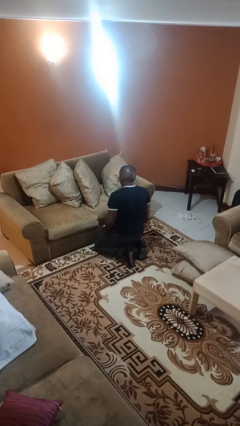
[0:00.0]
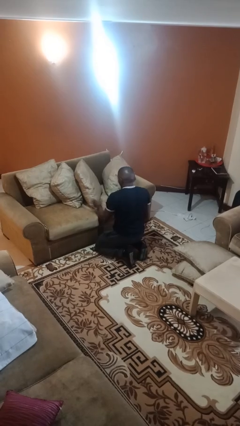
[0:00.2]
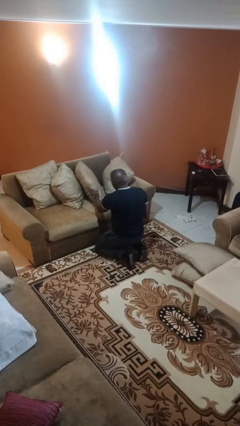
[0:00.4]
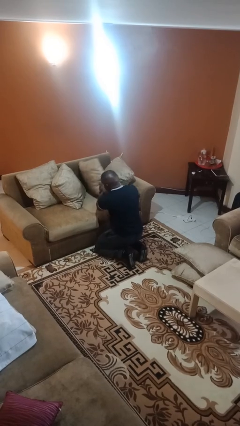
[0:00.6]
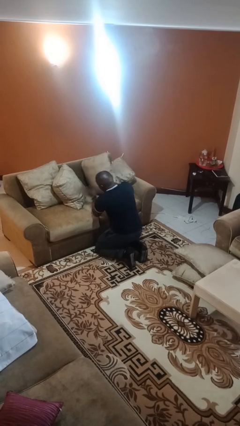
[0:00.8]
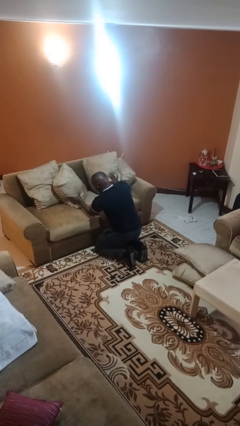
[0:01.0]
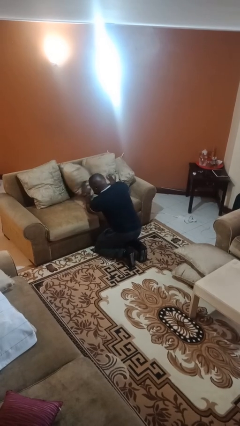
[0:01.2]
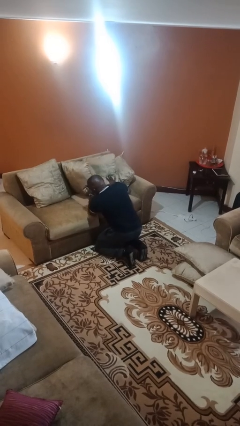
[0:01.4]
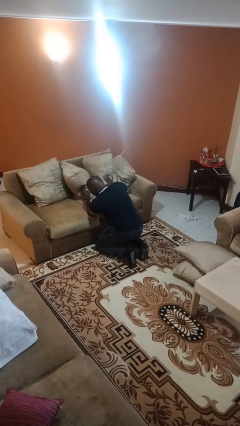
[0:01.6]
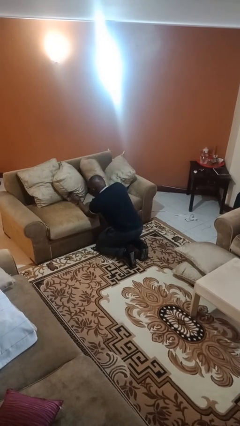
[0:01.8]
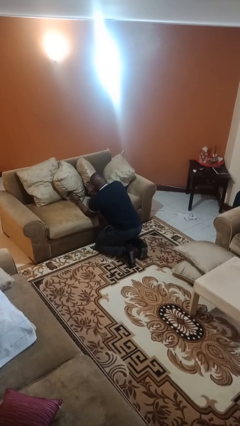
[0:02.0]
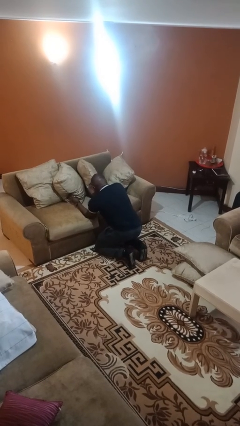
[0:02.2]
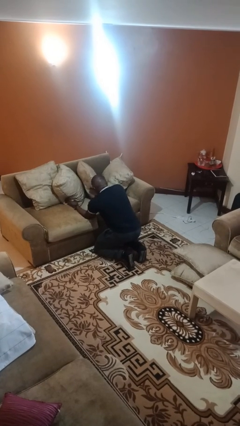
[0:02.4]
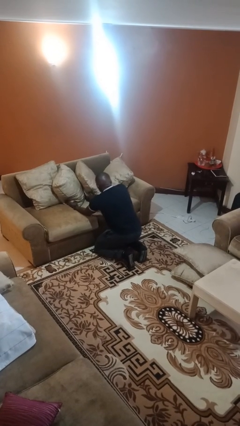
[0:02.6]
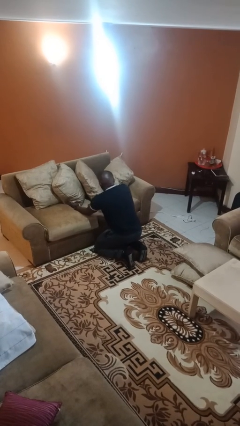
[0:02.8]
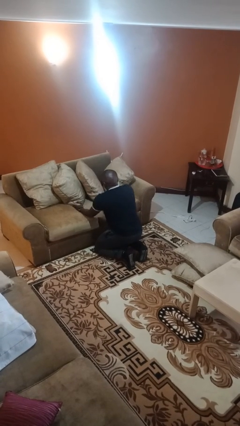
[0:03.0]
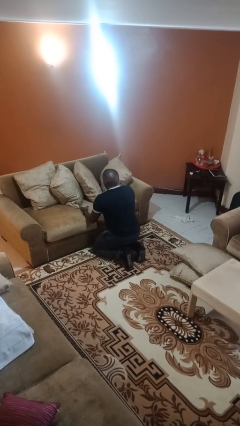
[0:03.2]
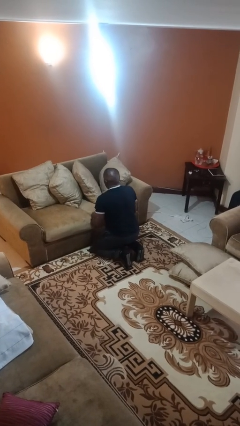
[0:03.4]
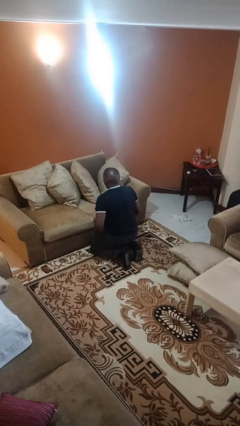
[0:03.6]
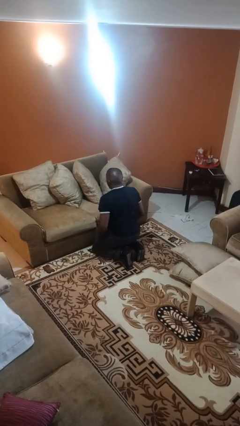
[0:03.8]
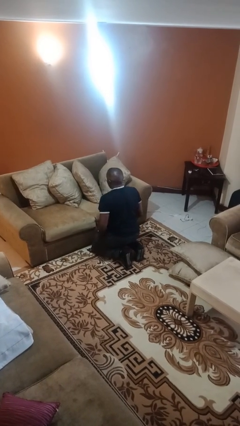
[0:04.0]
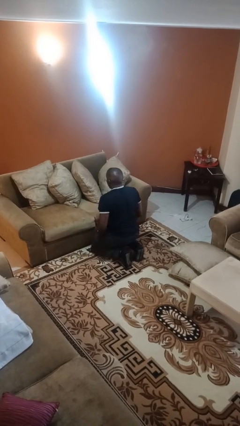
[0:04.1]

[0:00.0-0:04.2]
person searches in couch

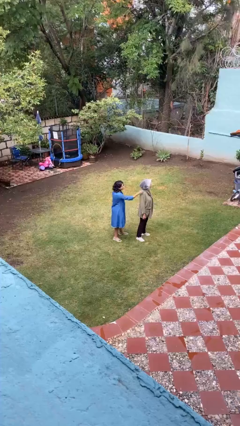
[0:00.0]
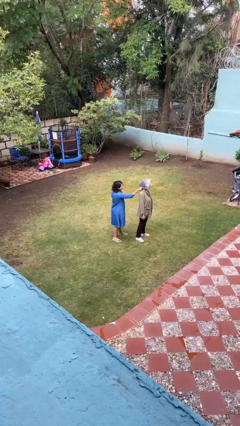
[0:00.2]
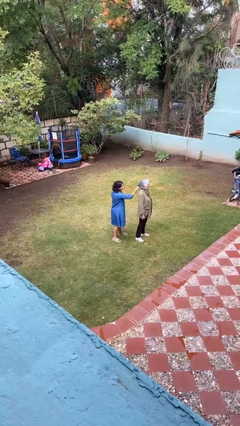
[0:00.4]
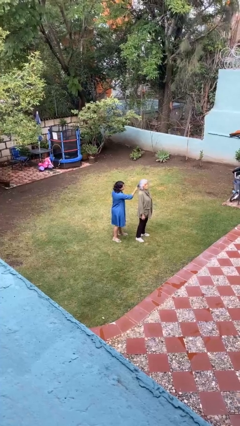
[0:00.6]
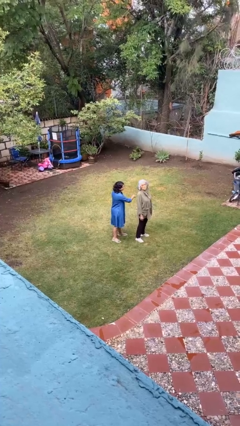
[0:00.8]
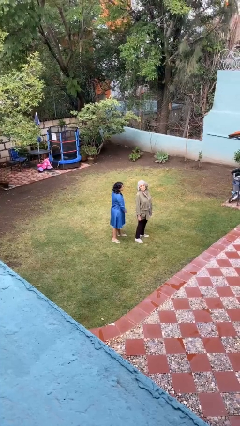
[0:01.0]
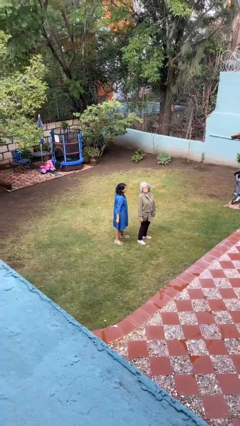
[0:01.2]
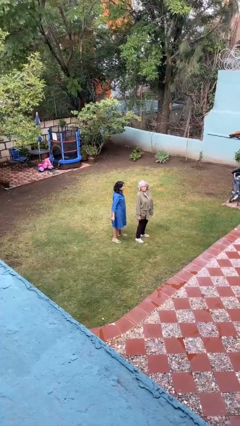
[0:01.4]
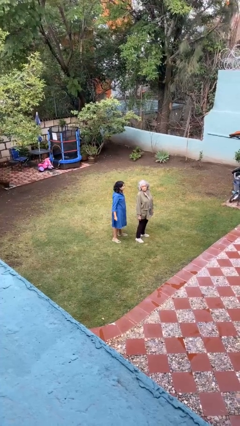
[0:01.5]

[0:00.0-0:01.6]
person grabs person by hair

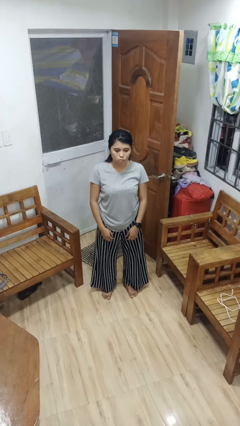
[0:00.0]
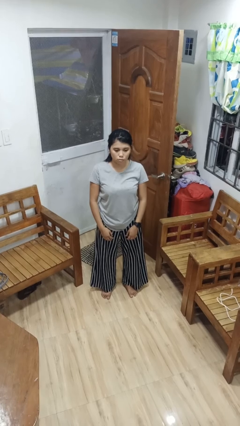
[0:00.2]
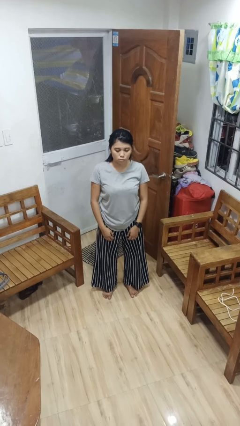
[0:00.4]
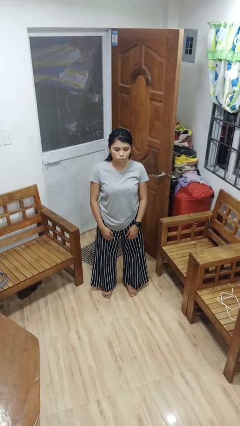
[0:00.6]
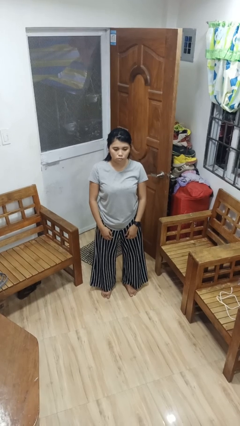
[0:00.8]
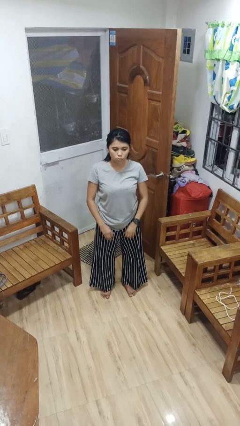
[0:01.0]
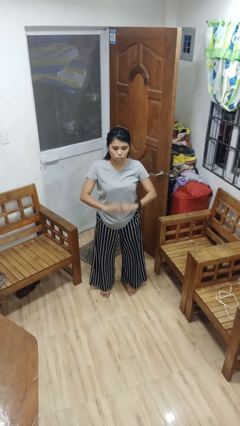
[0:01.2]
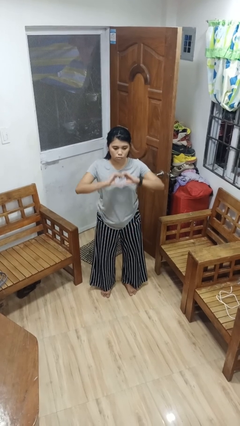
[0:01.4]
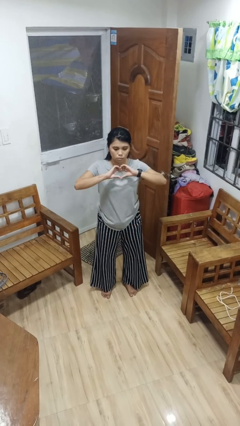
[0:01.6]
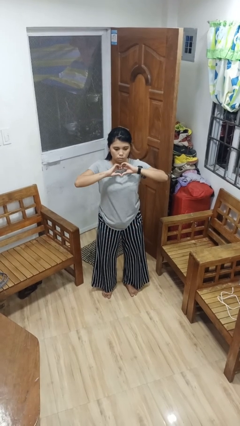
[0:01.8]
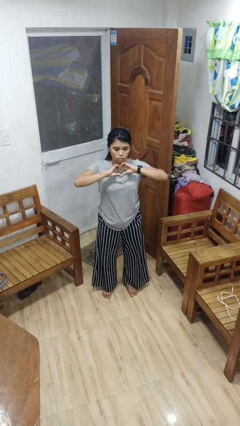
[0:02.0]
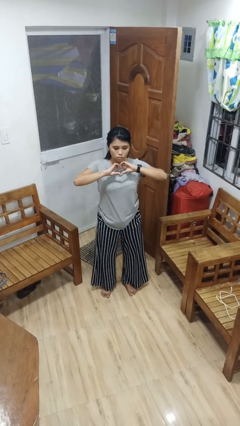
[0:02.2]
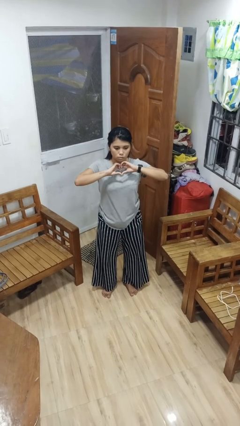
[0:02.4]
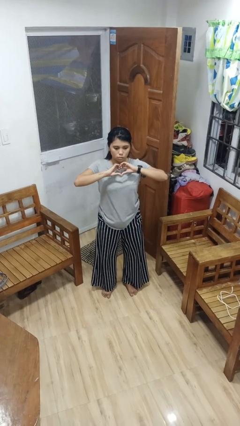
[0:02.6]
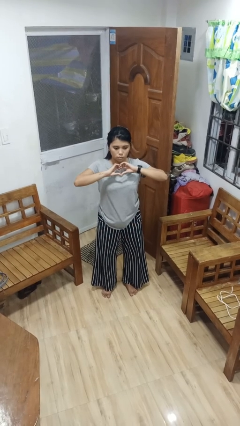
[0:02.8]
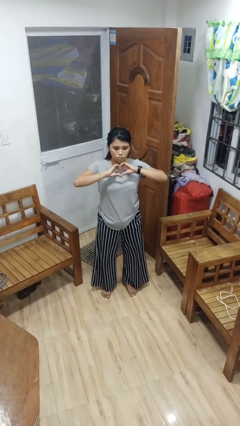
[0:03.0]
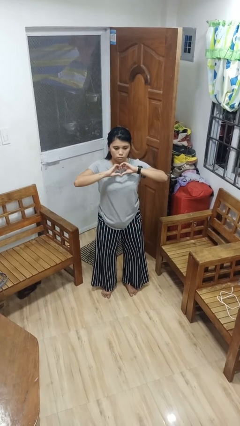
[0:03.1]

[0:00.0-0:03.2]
person gestures heart

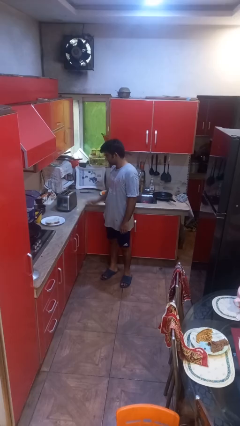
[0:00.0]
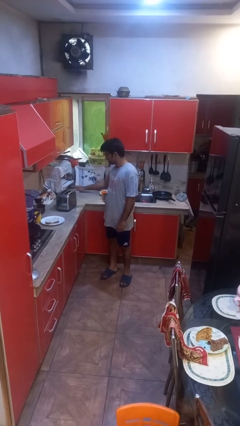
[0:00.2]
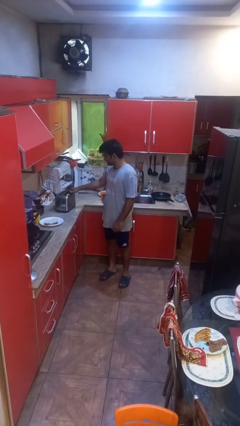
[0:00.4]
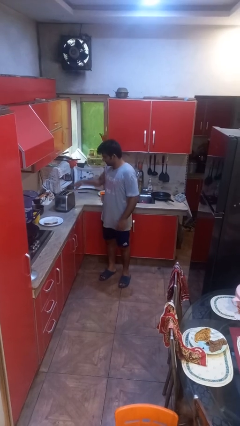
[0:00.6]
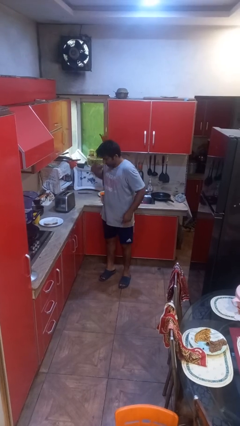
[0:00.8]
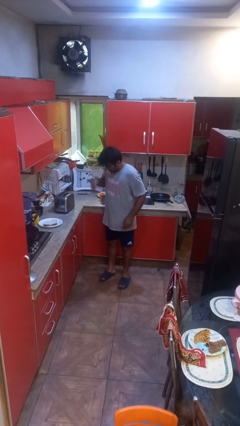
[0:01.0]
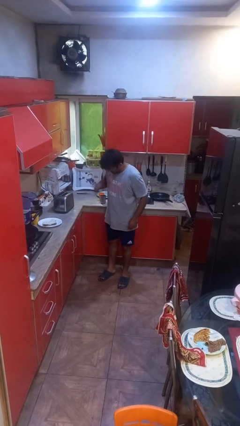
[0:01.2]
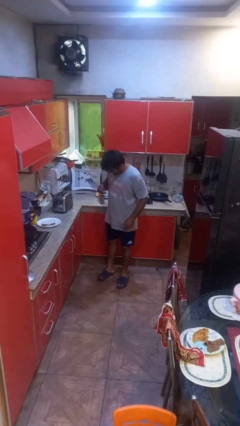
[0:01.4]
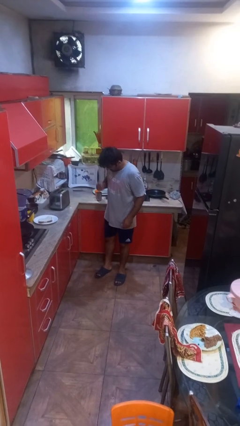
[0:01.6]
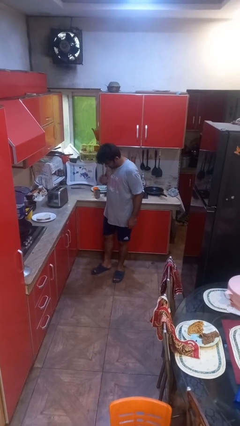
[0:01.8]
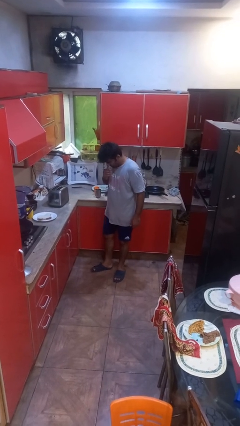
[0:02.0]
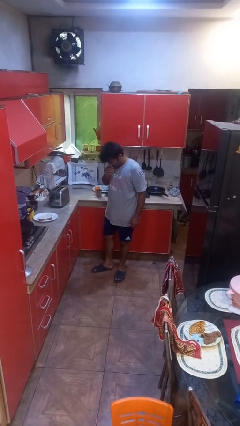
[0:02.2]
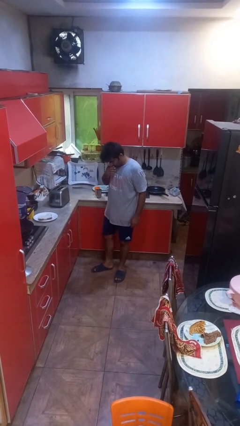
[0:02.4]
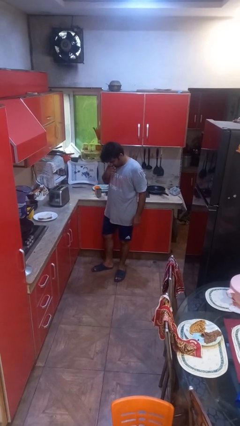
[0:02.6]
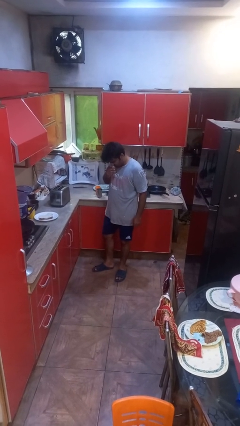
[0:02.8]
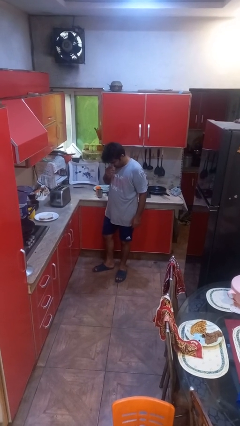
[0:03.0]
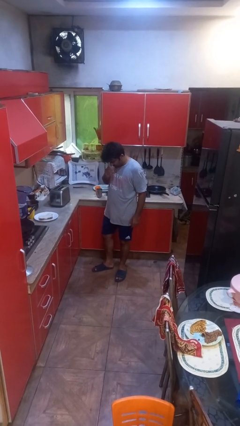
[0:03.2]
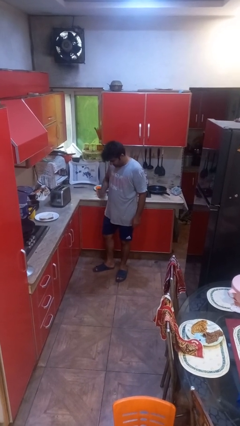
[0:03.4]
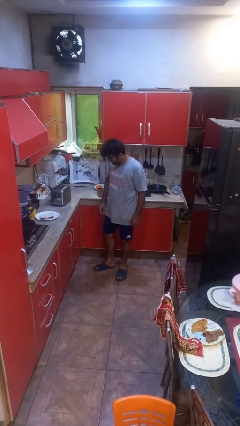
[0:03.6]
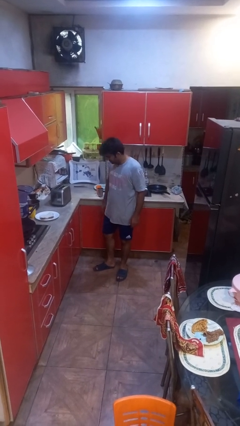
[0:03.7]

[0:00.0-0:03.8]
person burns hand

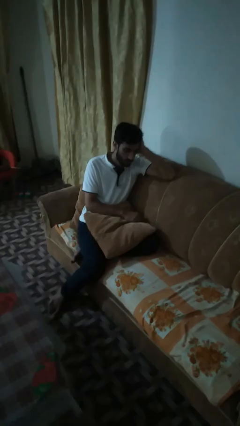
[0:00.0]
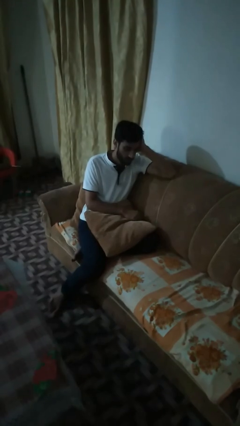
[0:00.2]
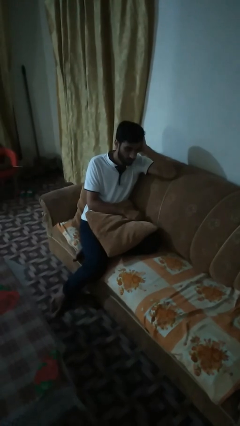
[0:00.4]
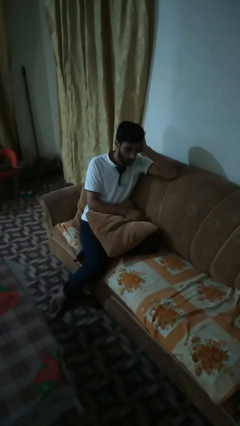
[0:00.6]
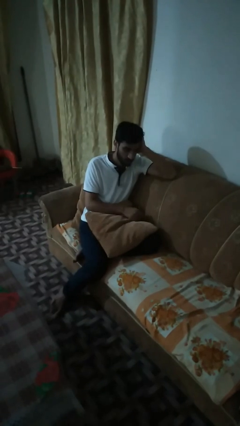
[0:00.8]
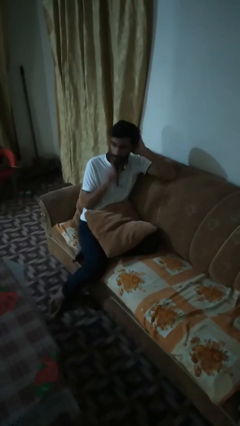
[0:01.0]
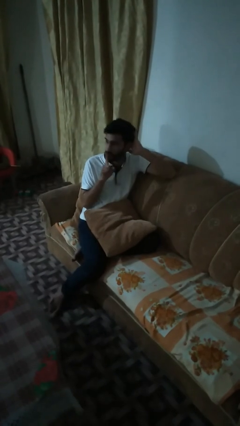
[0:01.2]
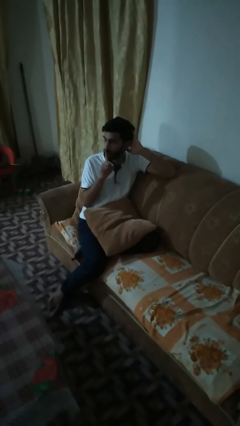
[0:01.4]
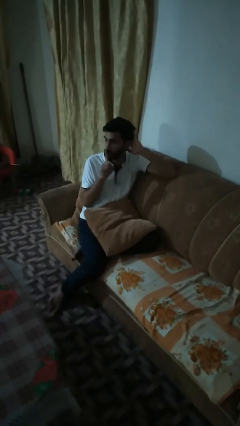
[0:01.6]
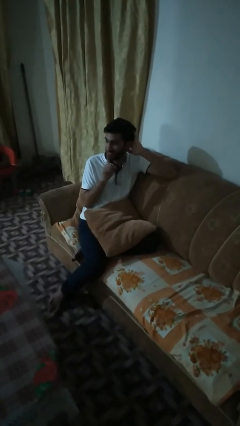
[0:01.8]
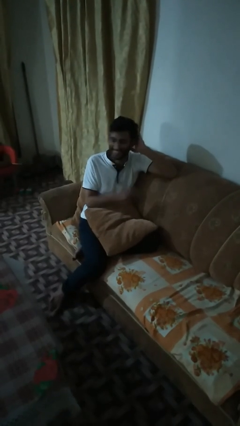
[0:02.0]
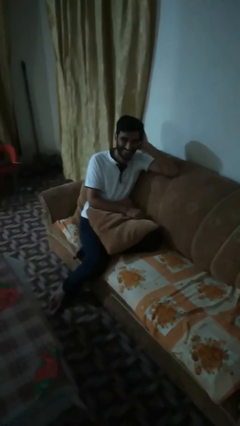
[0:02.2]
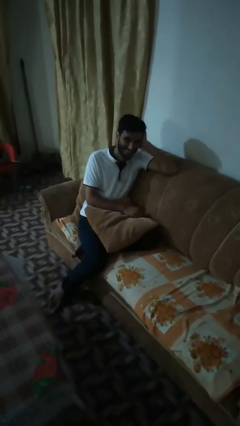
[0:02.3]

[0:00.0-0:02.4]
person gestures be quiet

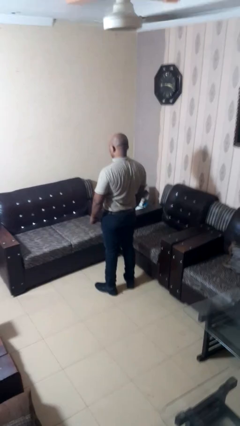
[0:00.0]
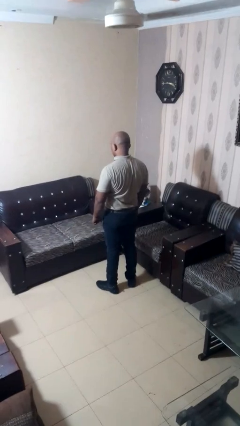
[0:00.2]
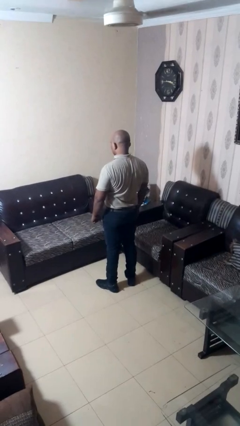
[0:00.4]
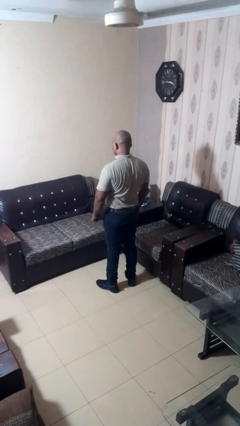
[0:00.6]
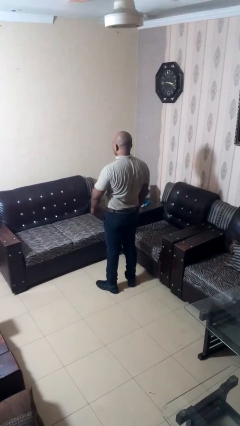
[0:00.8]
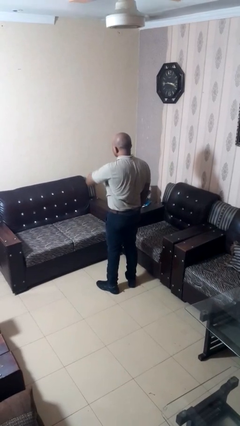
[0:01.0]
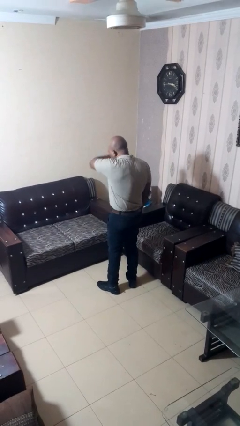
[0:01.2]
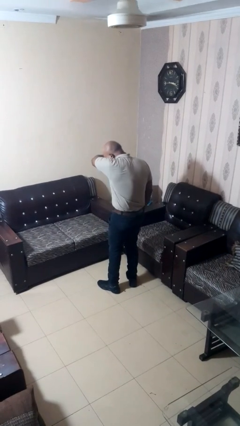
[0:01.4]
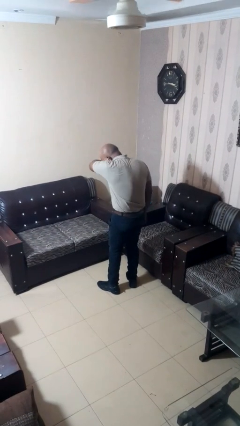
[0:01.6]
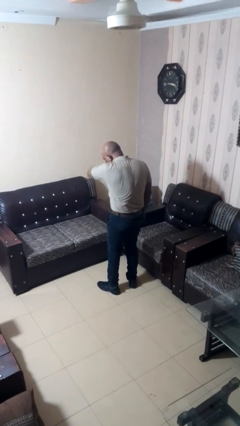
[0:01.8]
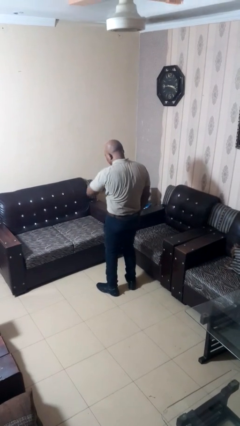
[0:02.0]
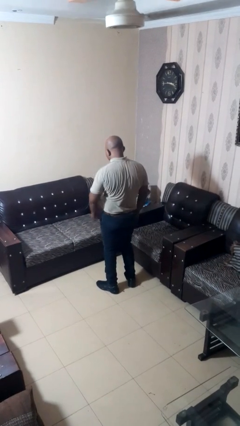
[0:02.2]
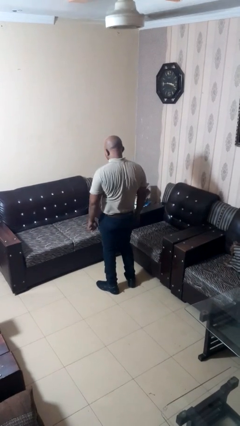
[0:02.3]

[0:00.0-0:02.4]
person sneezes into arm
